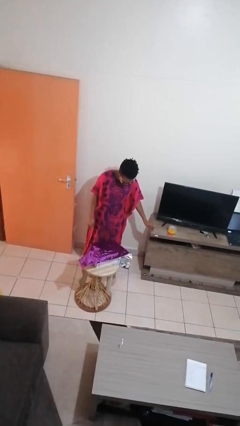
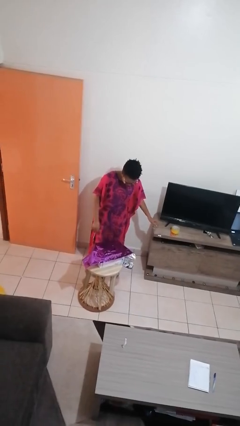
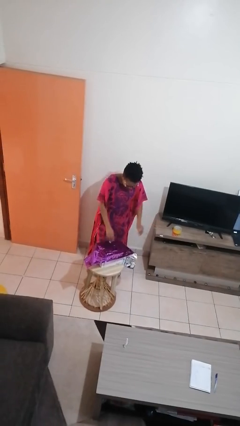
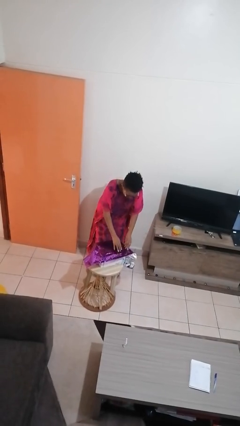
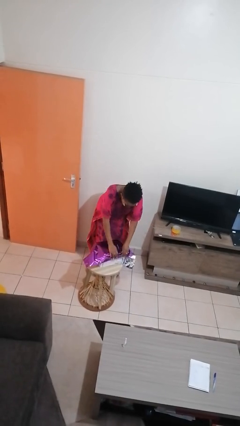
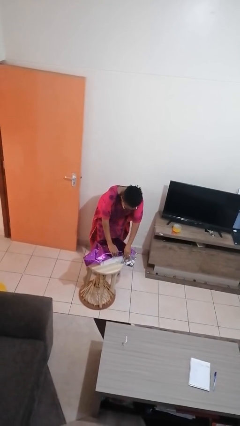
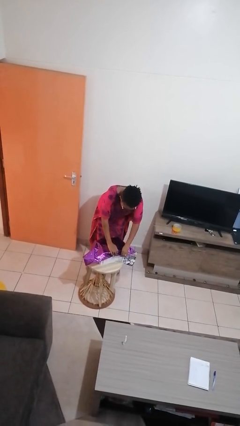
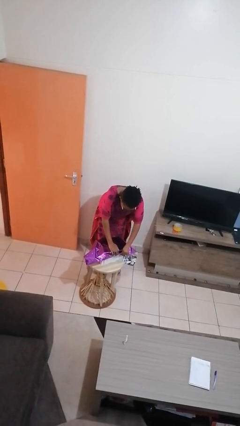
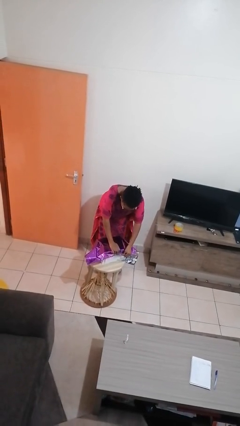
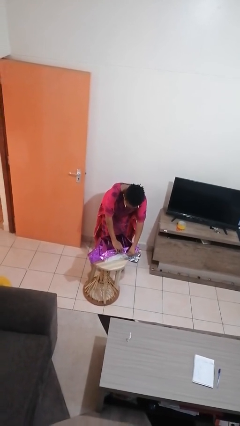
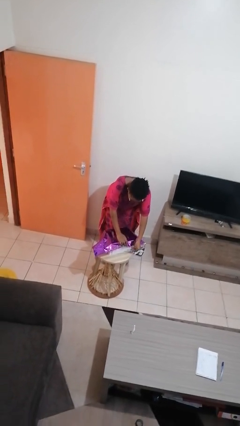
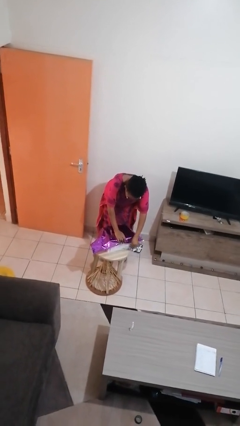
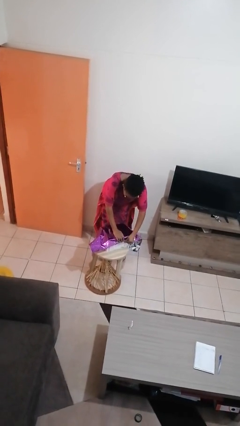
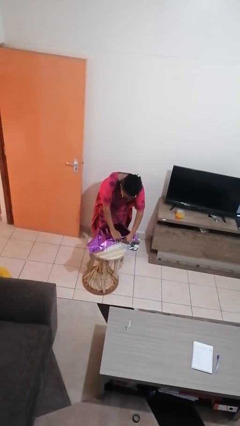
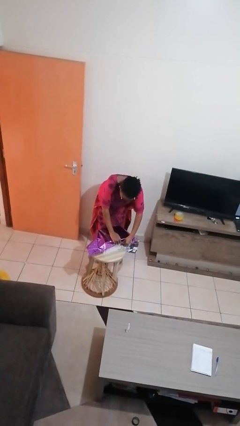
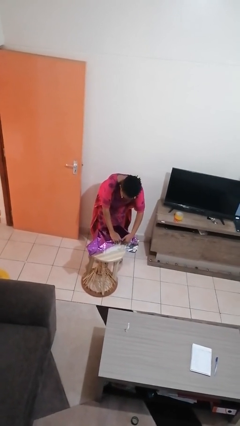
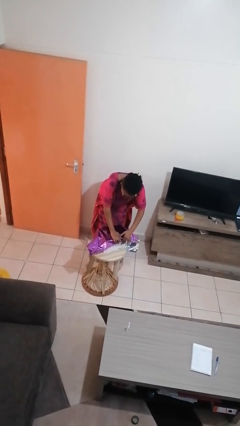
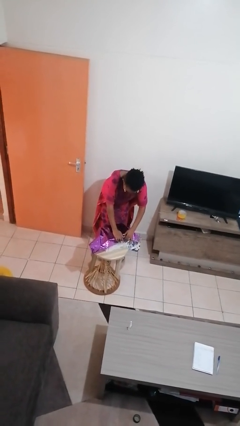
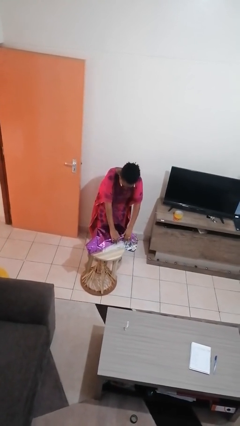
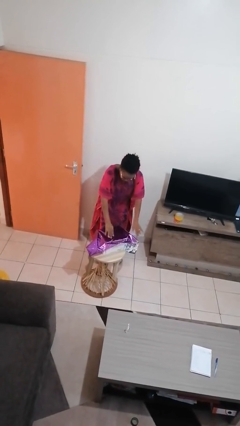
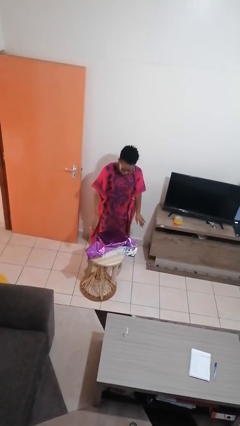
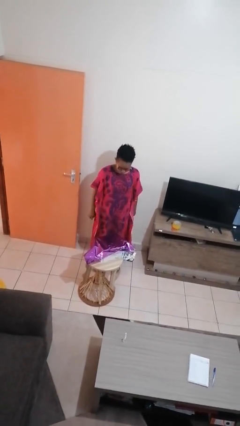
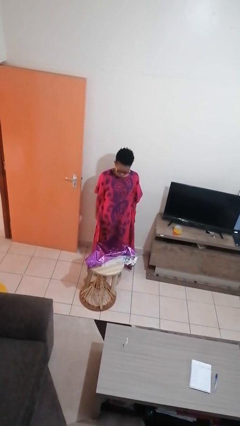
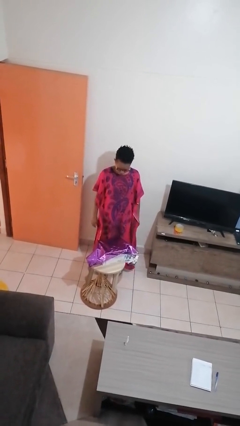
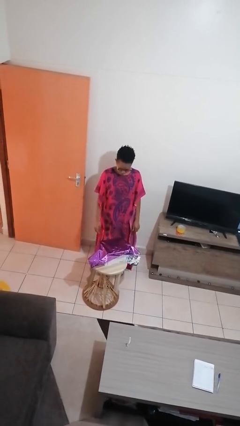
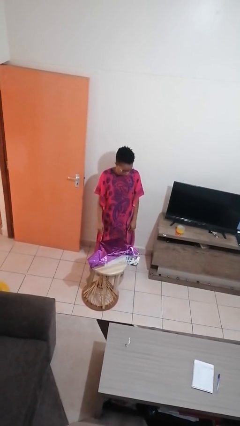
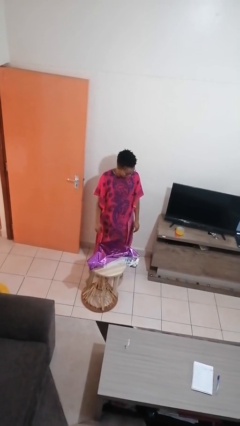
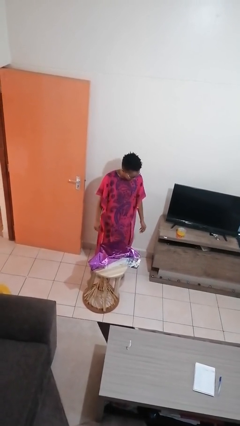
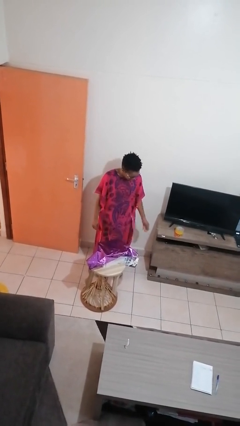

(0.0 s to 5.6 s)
person wraps box

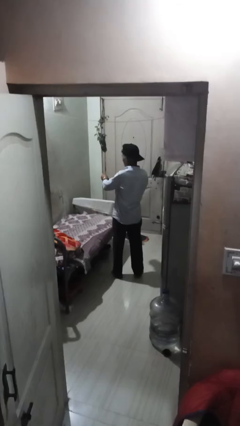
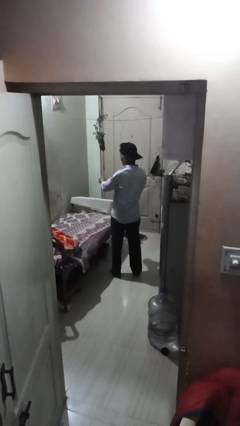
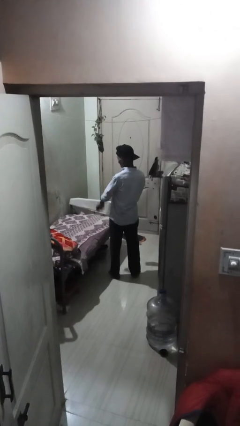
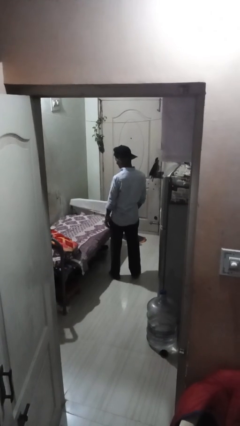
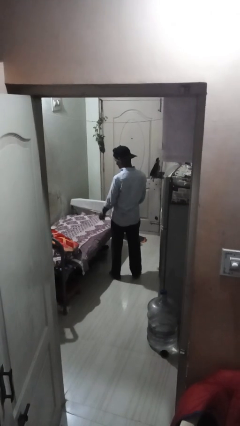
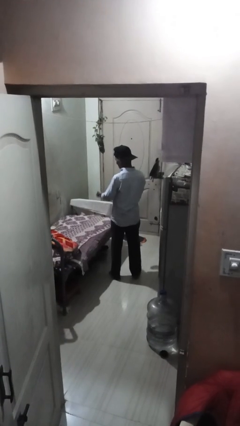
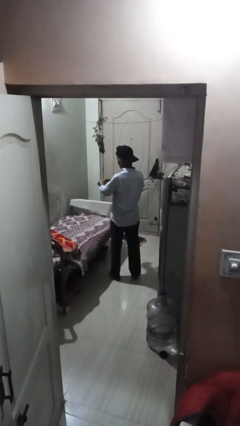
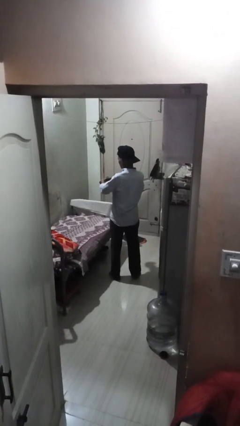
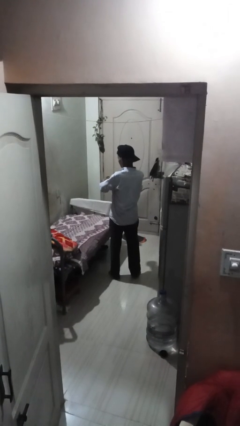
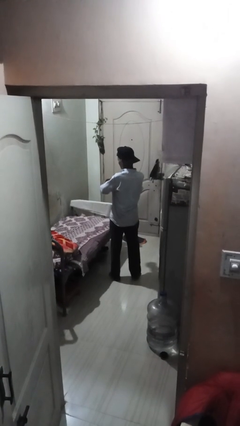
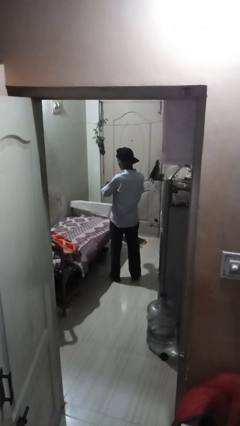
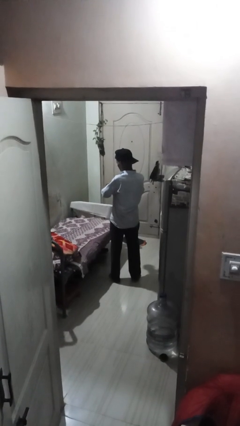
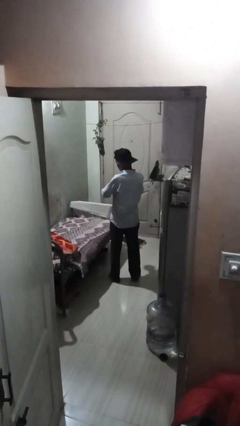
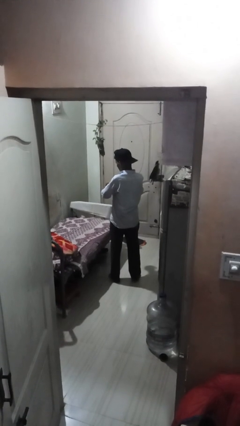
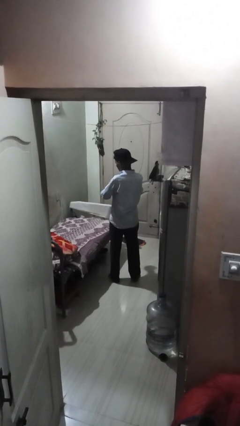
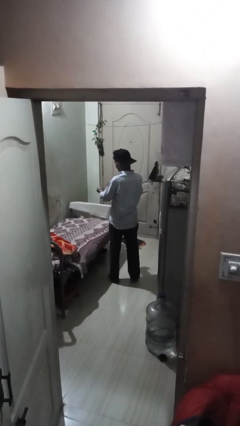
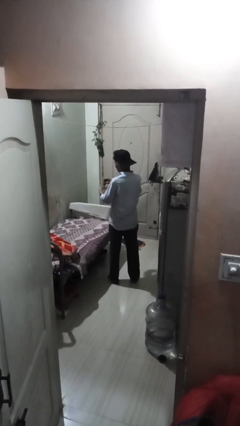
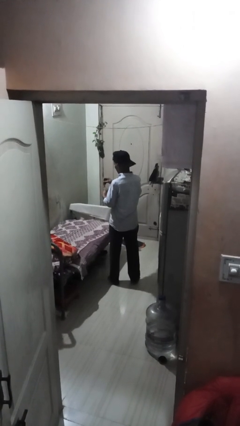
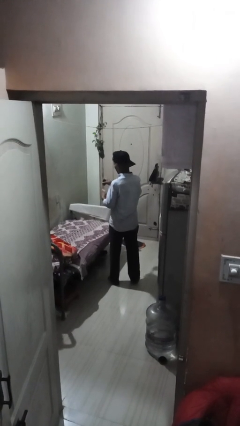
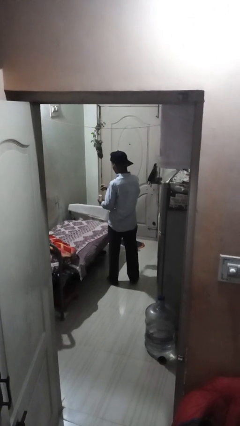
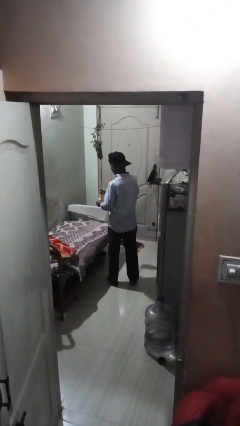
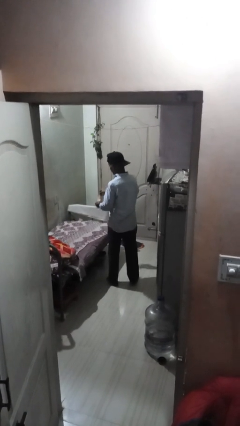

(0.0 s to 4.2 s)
person takes off wristwatch

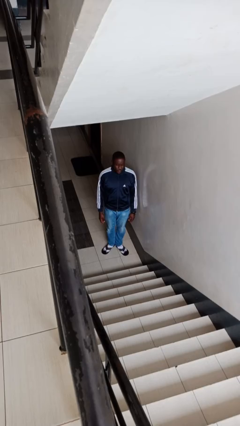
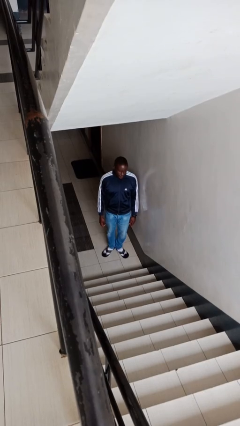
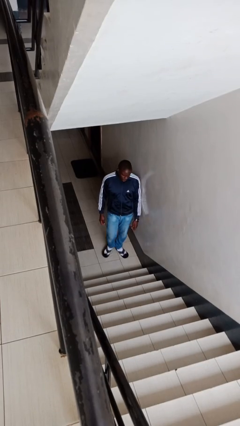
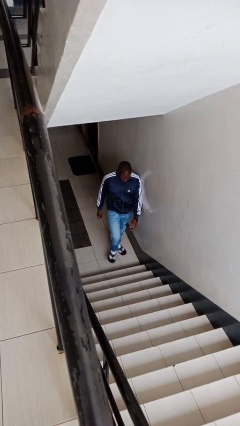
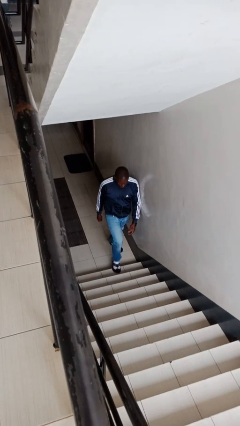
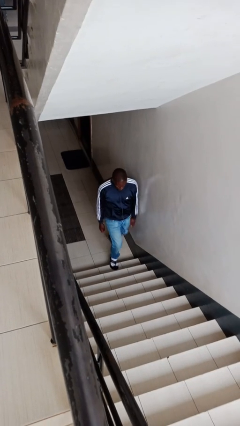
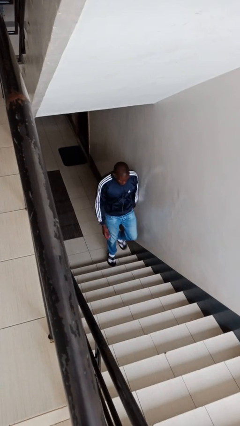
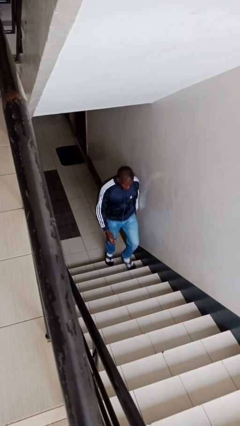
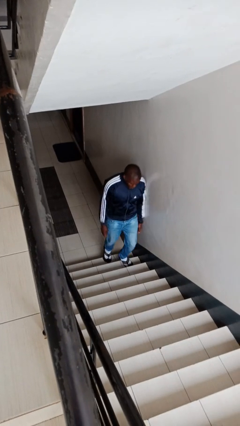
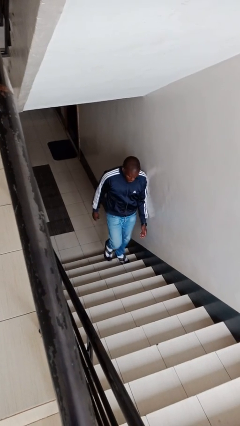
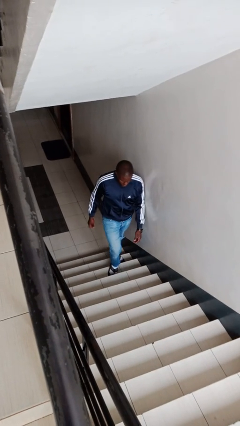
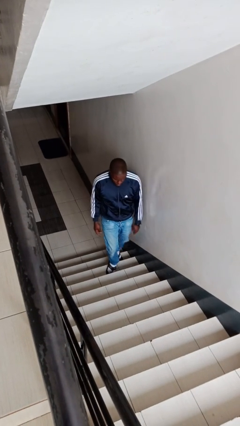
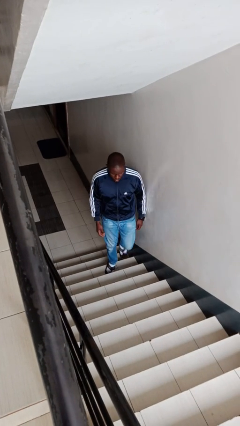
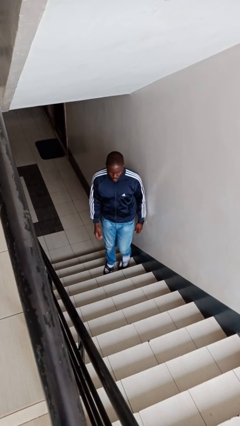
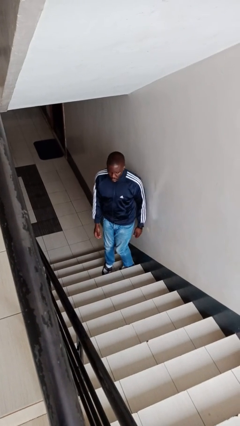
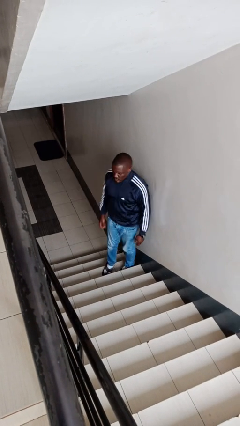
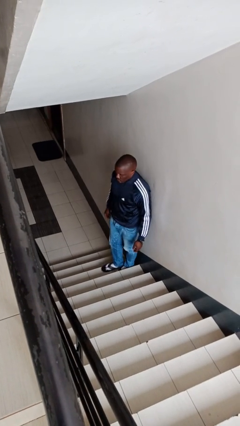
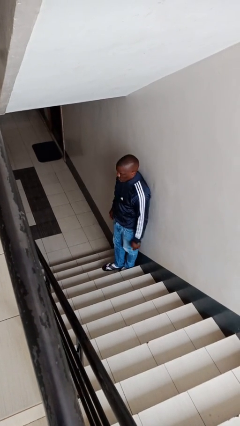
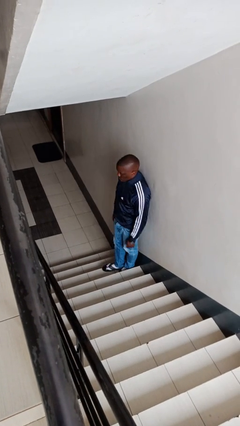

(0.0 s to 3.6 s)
person climbs up stairs

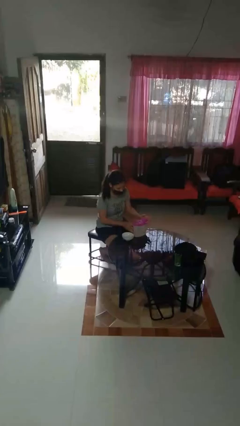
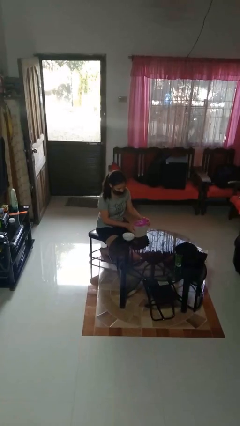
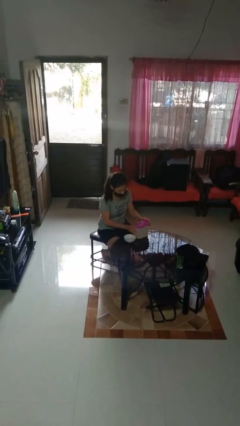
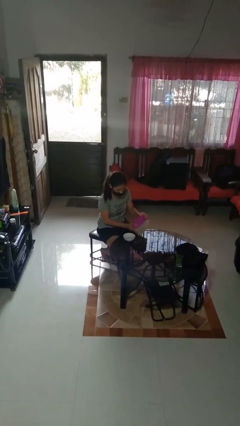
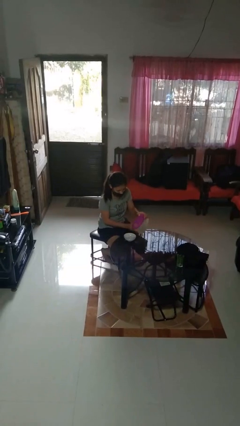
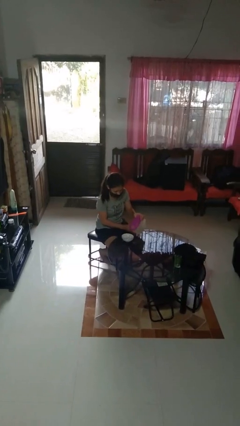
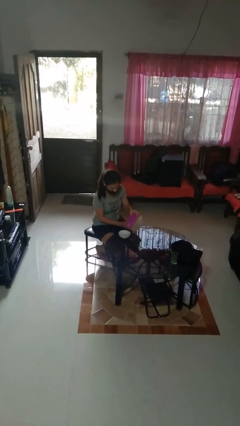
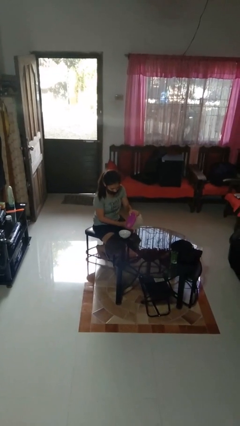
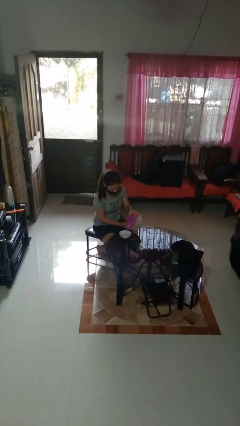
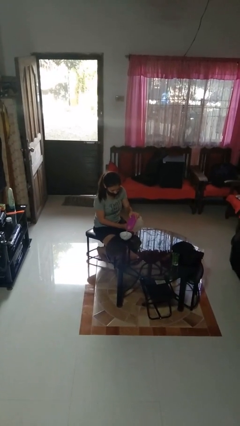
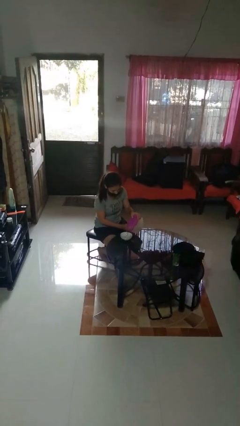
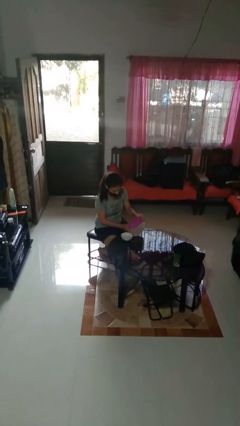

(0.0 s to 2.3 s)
person pours into bowl

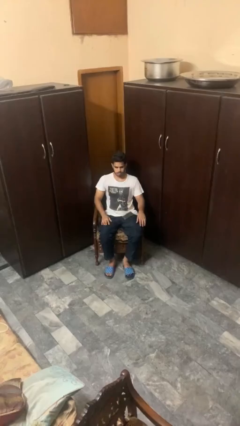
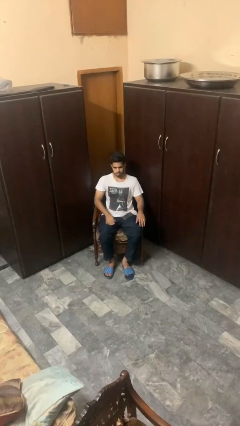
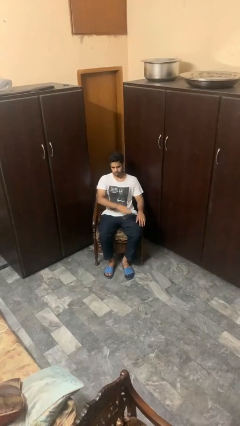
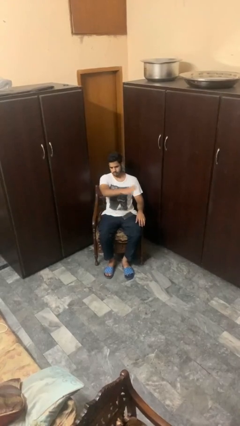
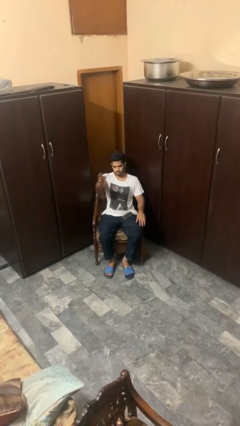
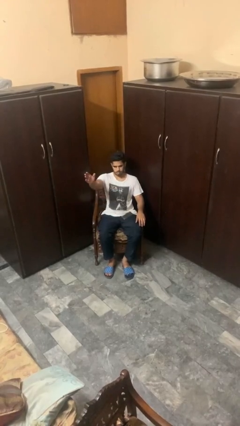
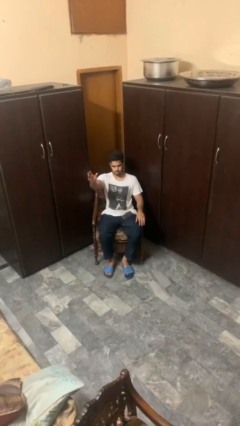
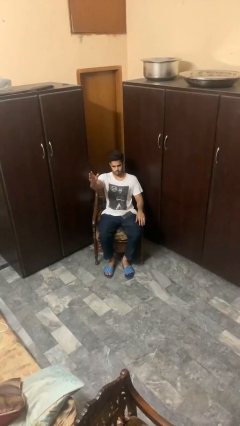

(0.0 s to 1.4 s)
person gestures swipe right

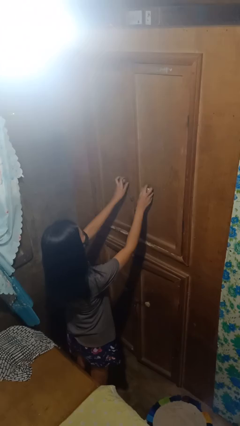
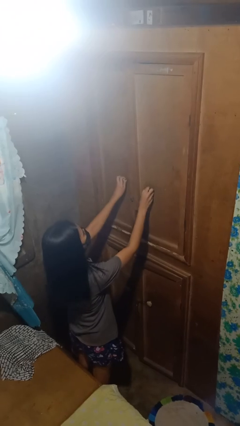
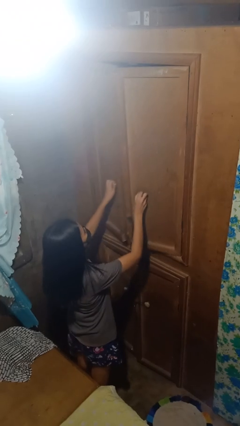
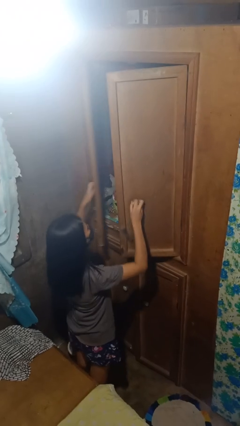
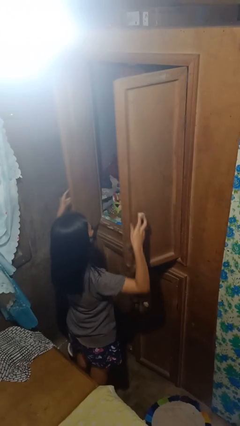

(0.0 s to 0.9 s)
person opens closet door
